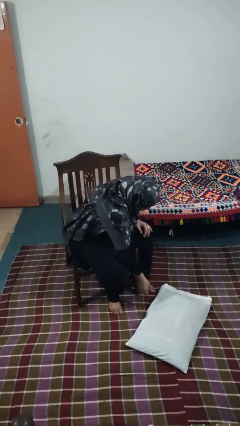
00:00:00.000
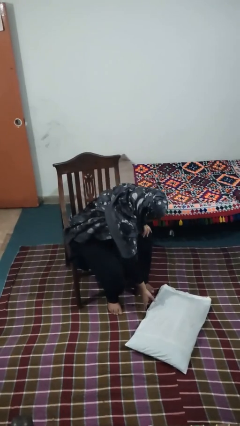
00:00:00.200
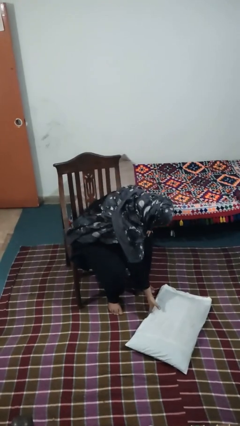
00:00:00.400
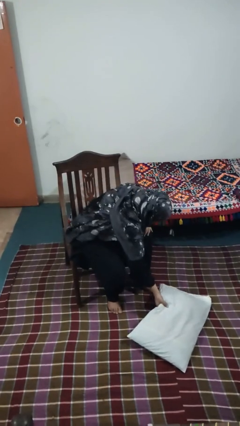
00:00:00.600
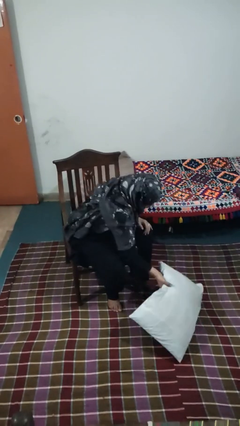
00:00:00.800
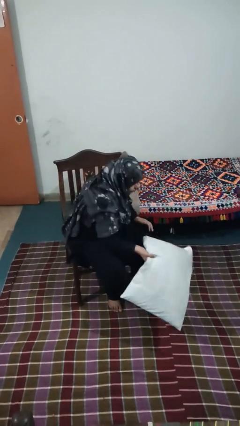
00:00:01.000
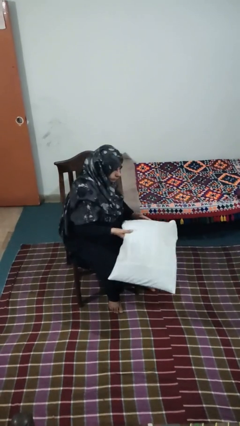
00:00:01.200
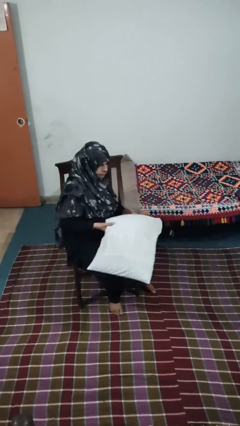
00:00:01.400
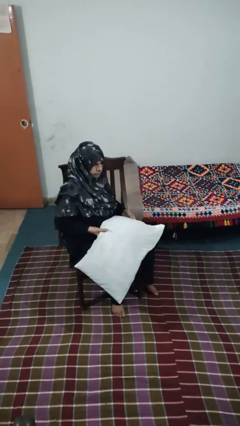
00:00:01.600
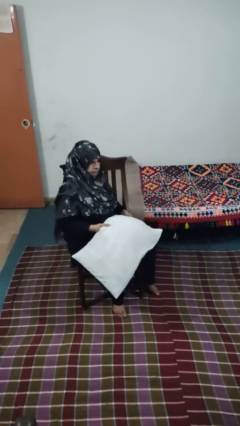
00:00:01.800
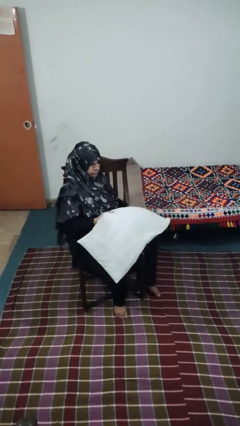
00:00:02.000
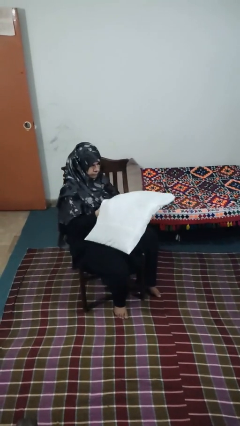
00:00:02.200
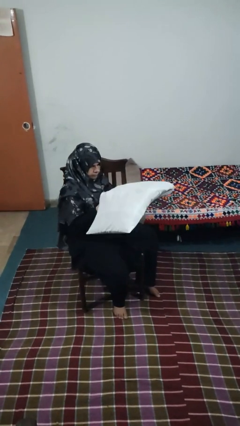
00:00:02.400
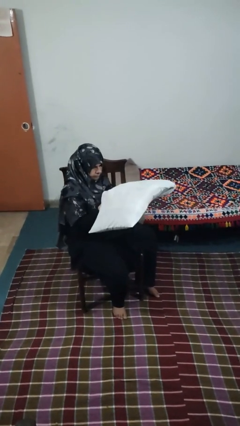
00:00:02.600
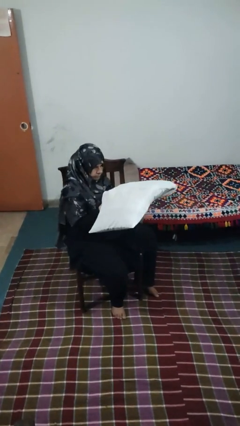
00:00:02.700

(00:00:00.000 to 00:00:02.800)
person picks up object from floor

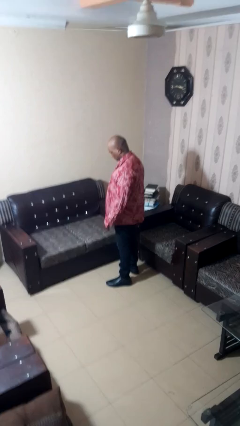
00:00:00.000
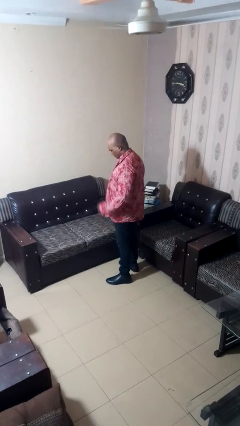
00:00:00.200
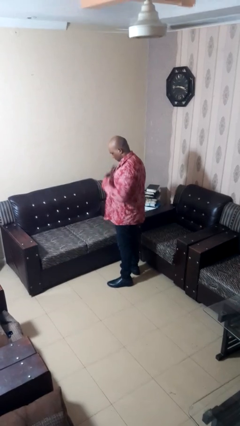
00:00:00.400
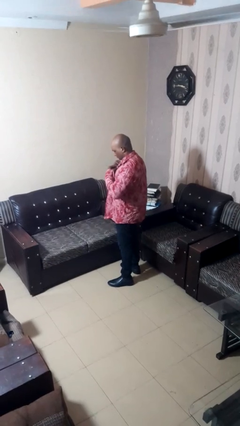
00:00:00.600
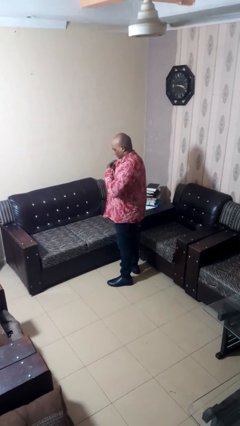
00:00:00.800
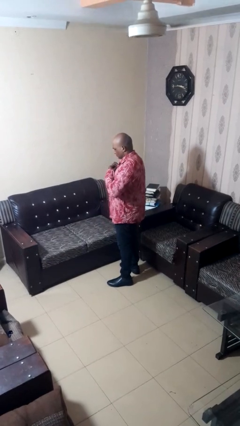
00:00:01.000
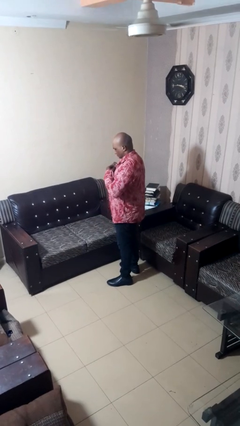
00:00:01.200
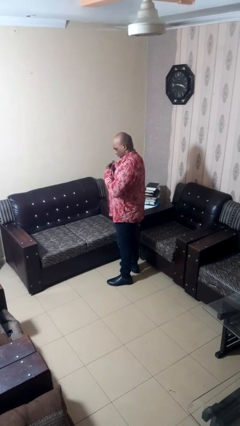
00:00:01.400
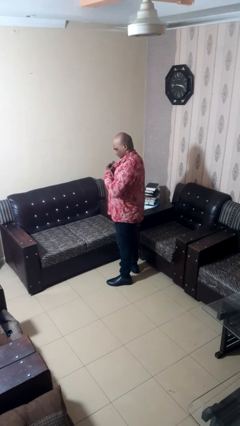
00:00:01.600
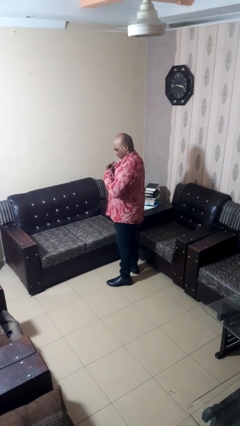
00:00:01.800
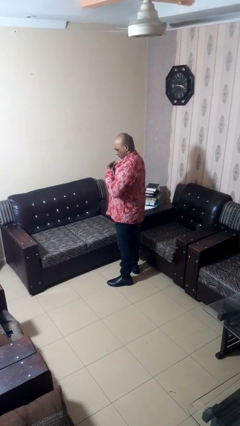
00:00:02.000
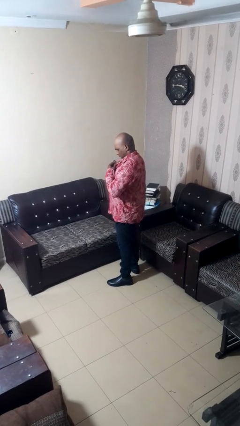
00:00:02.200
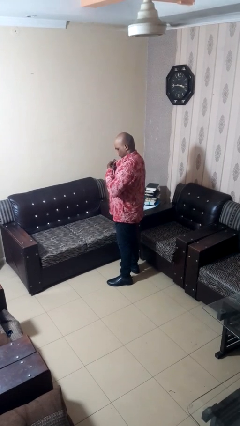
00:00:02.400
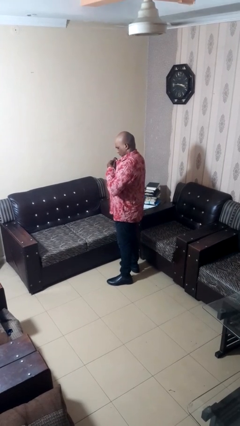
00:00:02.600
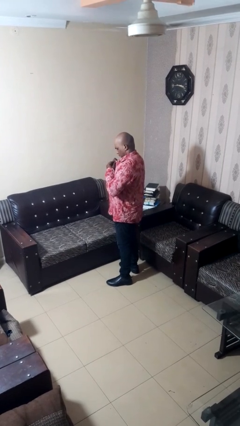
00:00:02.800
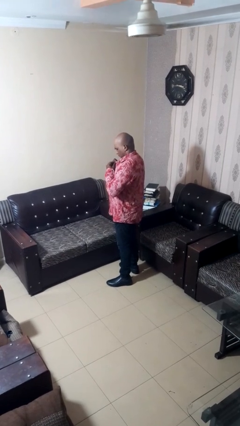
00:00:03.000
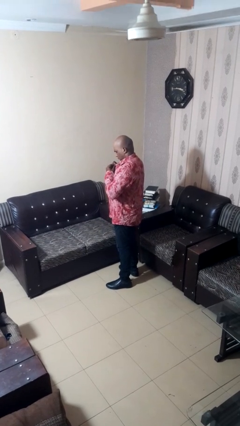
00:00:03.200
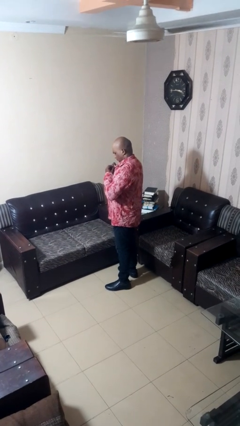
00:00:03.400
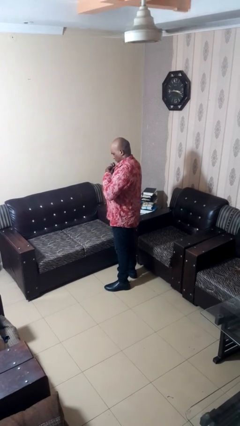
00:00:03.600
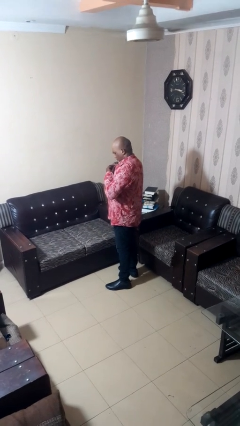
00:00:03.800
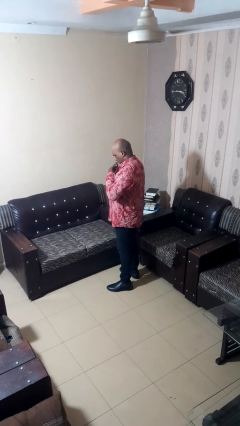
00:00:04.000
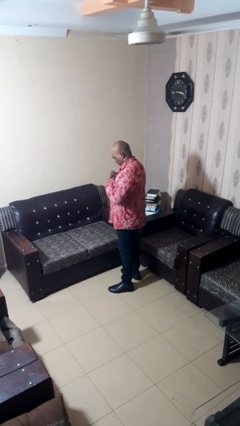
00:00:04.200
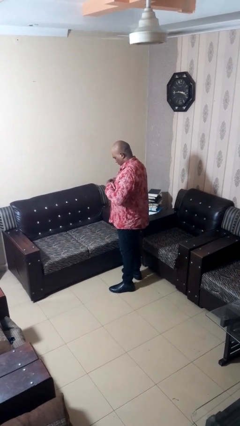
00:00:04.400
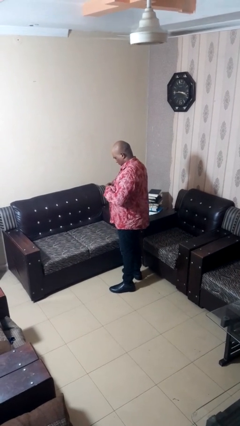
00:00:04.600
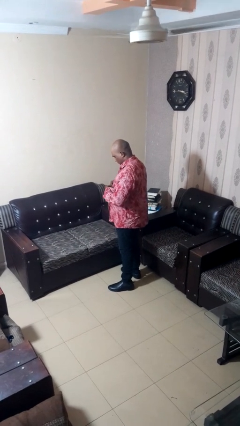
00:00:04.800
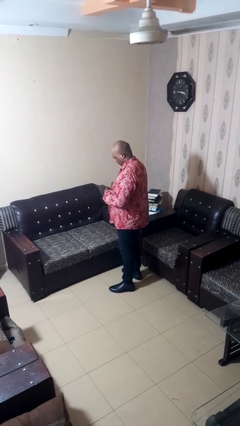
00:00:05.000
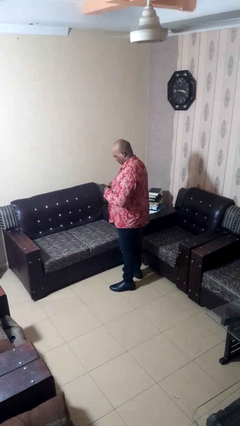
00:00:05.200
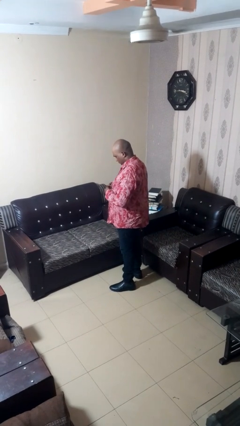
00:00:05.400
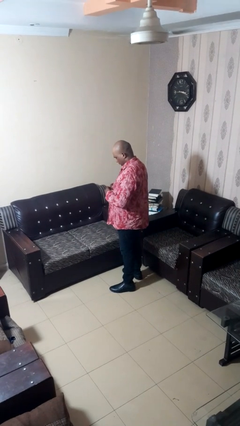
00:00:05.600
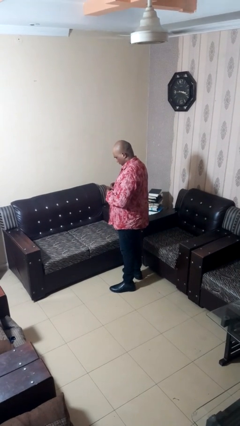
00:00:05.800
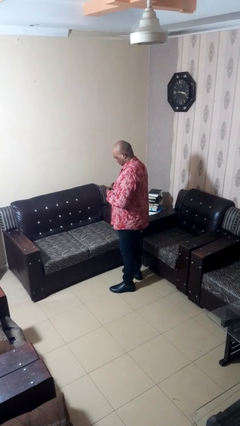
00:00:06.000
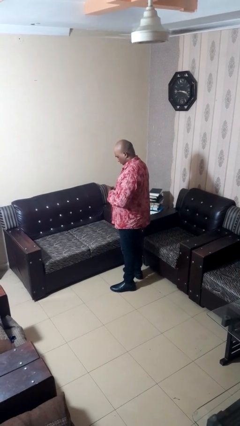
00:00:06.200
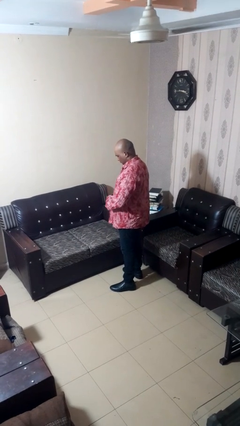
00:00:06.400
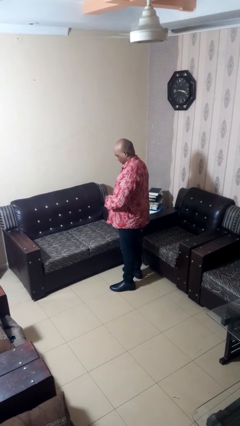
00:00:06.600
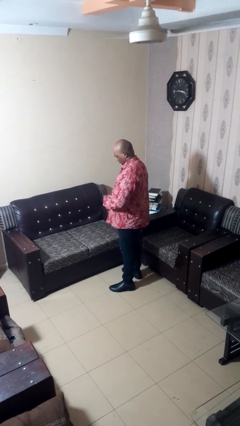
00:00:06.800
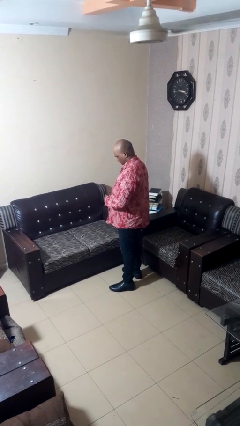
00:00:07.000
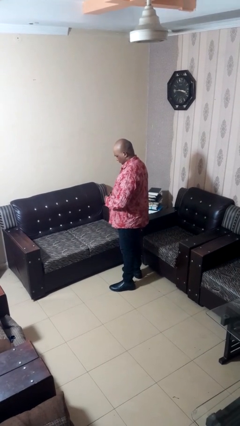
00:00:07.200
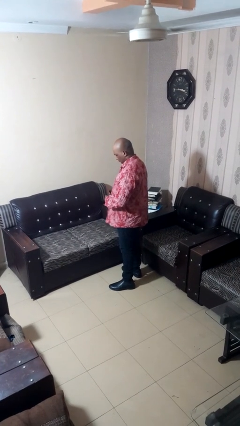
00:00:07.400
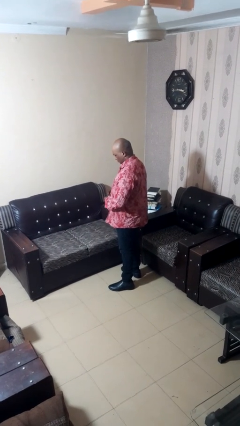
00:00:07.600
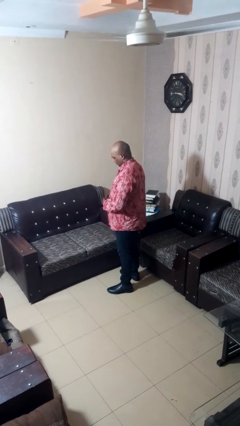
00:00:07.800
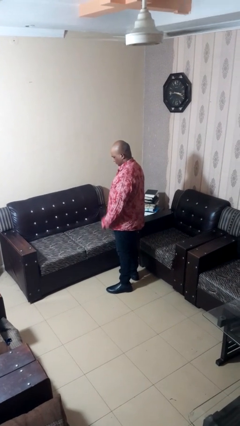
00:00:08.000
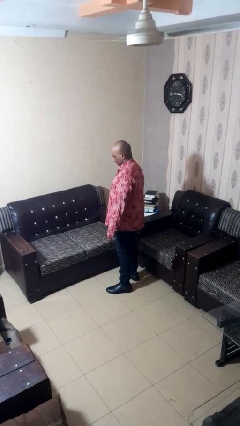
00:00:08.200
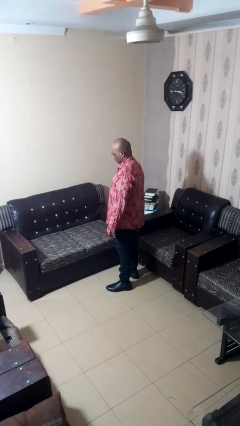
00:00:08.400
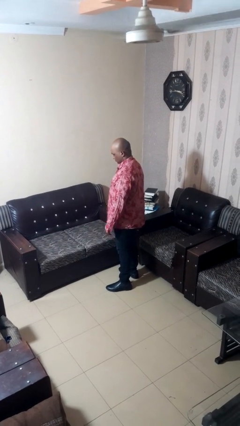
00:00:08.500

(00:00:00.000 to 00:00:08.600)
person buttons shirt

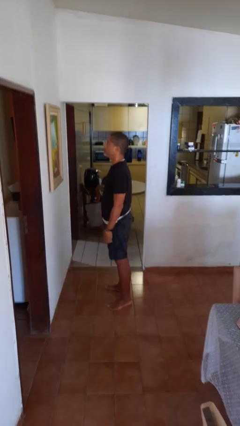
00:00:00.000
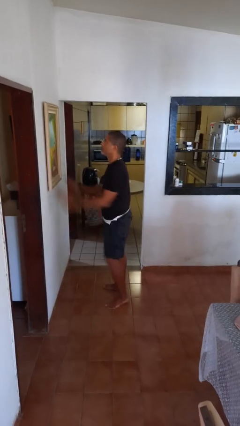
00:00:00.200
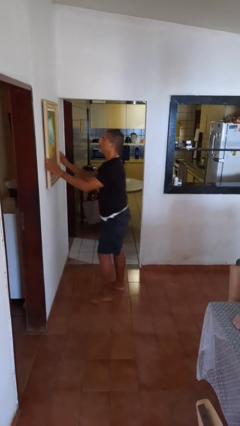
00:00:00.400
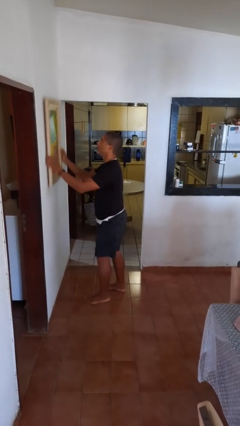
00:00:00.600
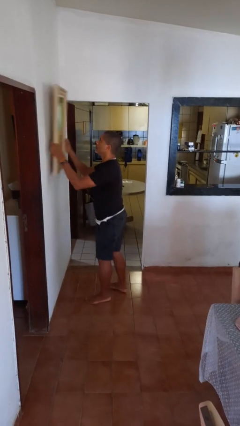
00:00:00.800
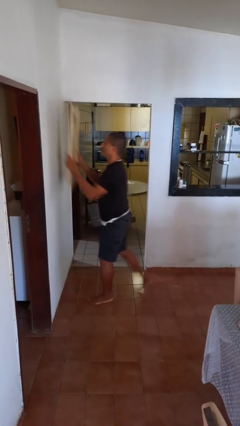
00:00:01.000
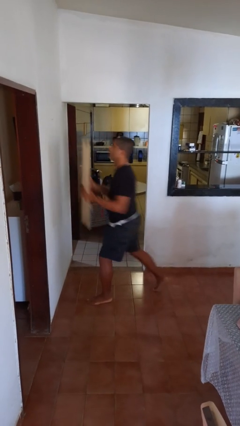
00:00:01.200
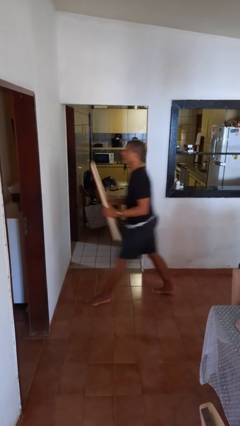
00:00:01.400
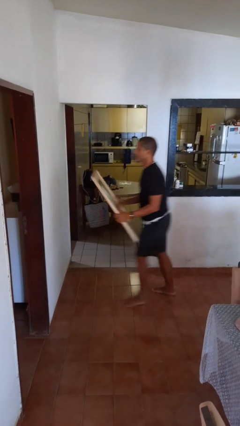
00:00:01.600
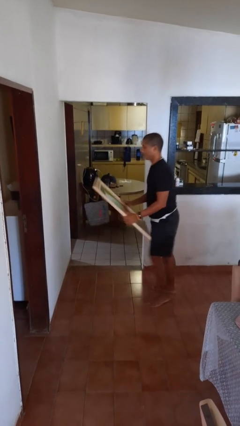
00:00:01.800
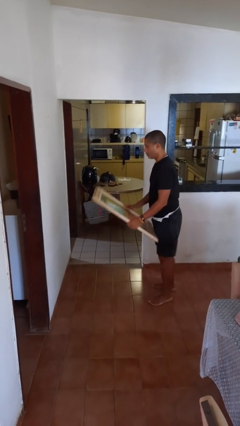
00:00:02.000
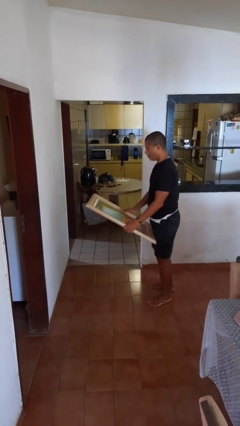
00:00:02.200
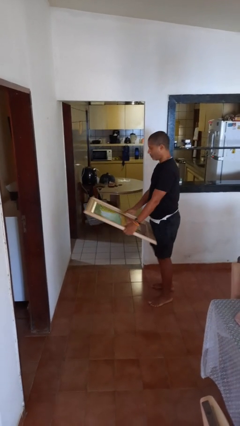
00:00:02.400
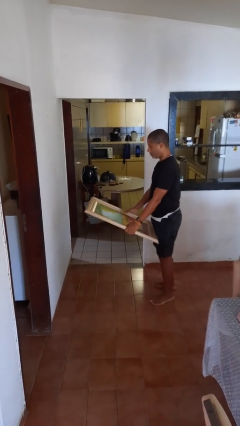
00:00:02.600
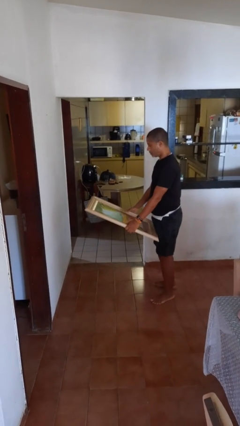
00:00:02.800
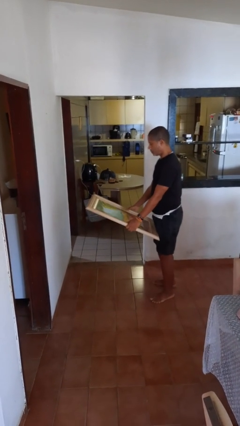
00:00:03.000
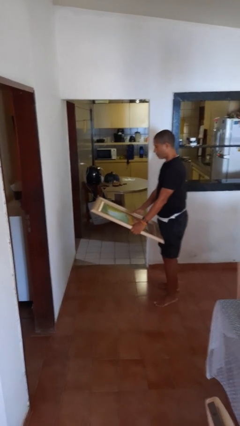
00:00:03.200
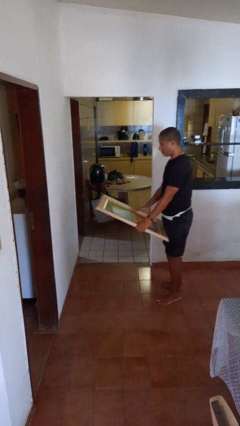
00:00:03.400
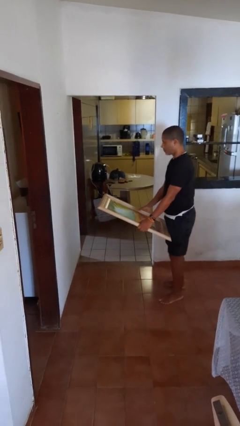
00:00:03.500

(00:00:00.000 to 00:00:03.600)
person takes down picture frame

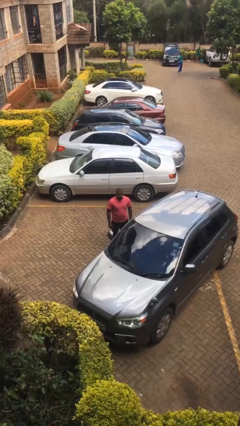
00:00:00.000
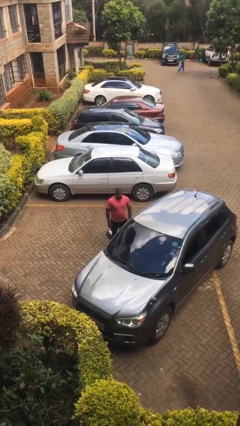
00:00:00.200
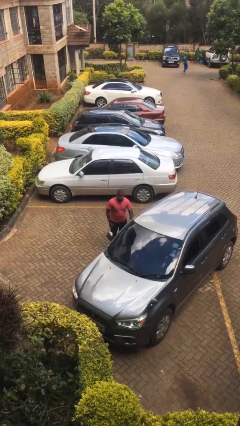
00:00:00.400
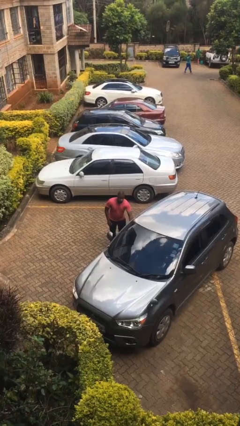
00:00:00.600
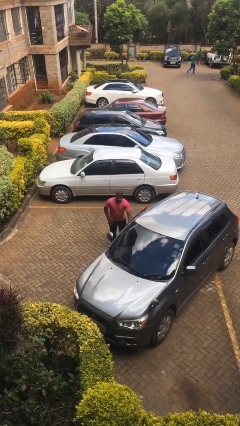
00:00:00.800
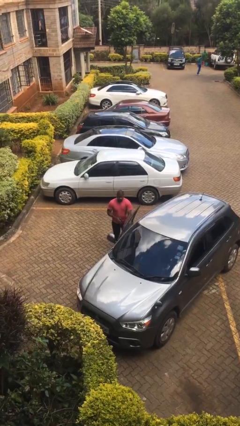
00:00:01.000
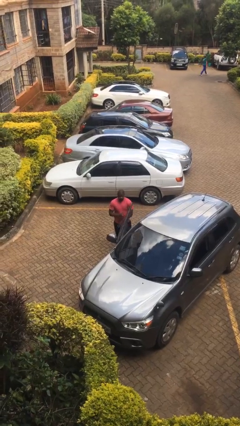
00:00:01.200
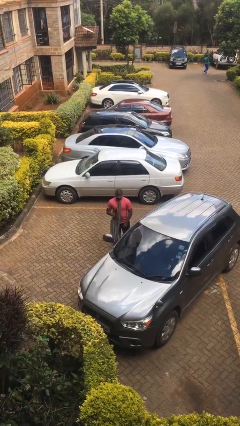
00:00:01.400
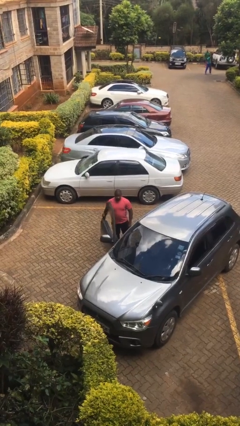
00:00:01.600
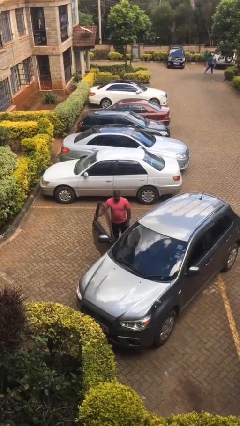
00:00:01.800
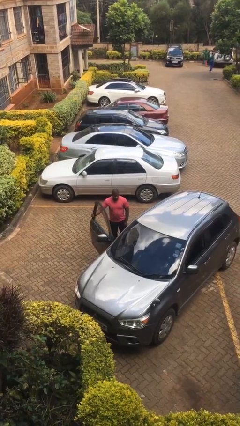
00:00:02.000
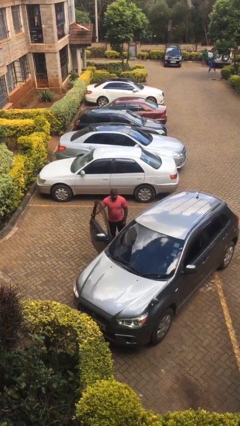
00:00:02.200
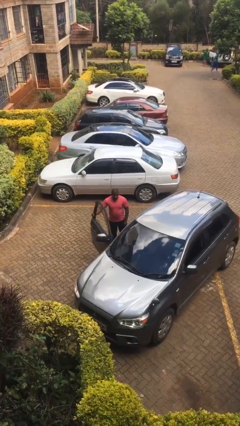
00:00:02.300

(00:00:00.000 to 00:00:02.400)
person opens car door

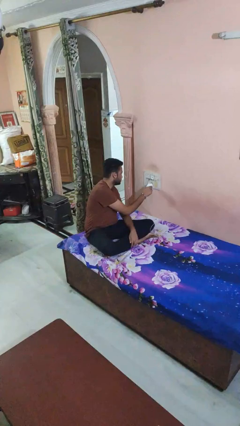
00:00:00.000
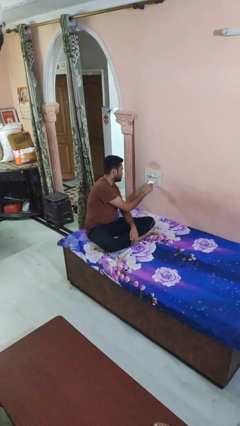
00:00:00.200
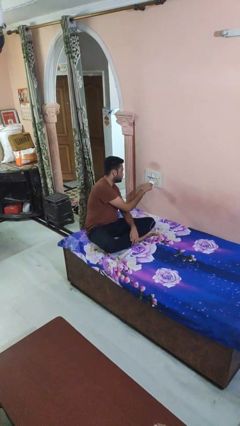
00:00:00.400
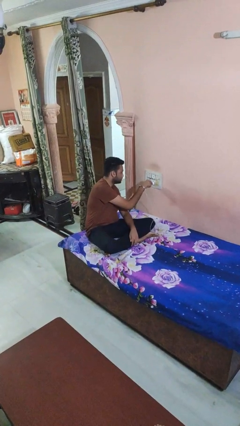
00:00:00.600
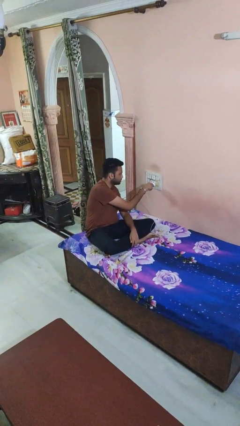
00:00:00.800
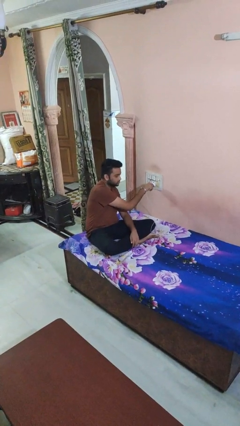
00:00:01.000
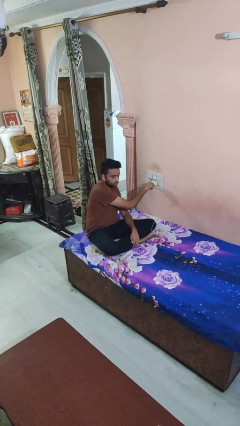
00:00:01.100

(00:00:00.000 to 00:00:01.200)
person plugs into electrical socket
